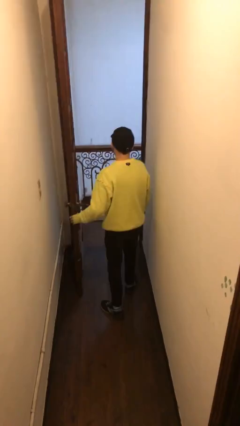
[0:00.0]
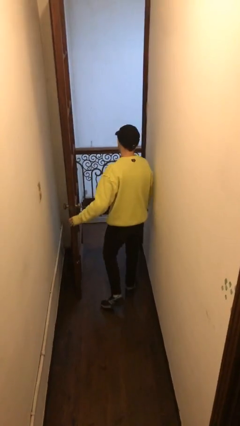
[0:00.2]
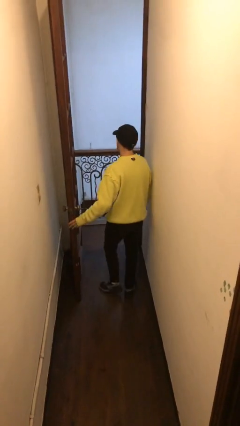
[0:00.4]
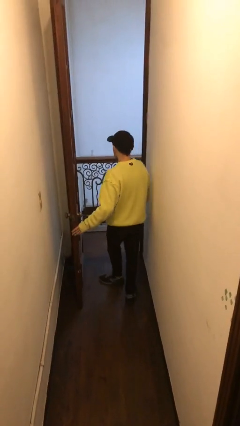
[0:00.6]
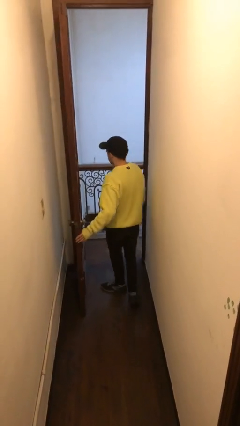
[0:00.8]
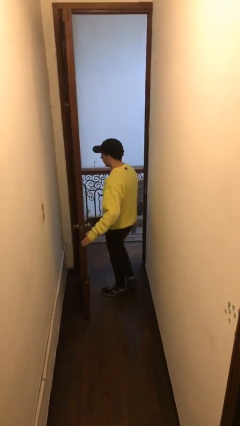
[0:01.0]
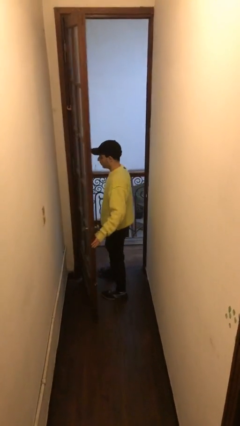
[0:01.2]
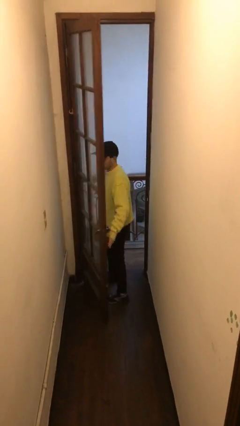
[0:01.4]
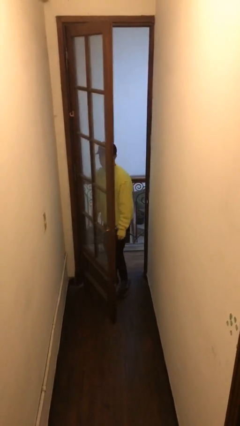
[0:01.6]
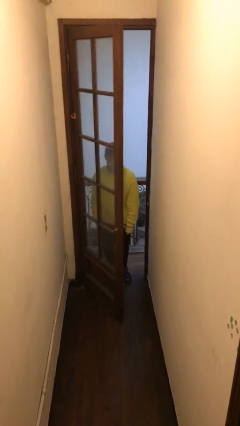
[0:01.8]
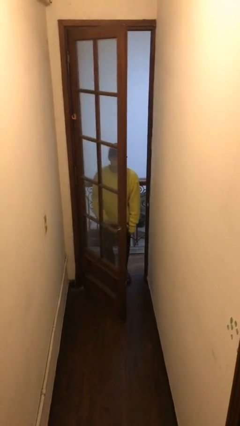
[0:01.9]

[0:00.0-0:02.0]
person exits scene through structure

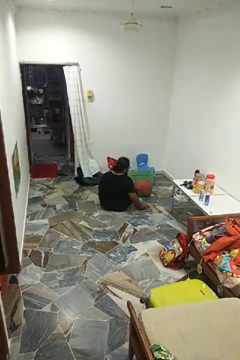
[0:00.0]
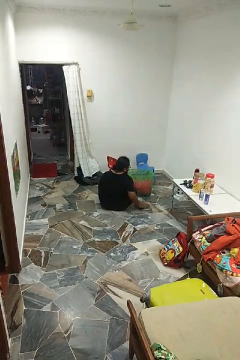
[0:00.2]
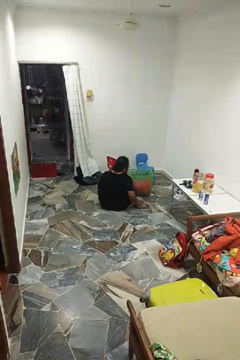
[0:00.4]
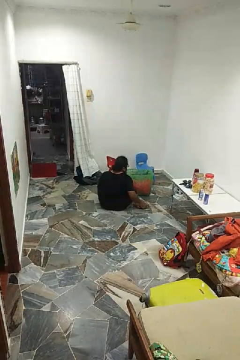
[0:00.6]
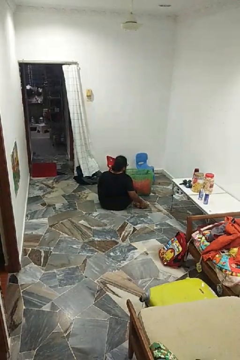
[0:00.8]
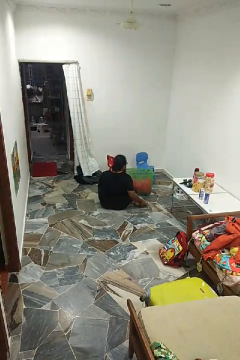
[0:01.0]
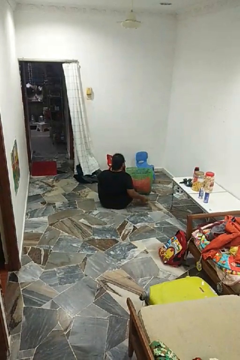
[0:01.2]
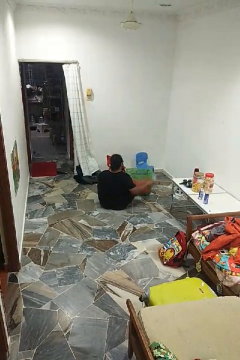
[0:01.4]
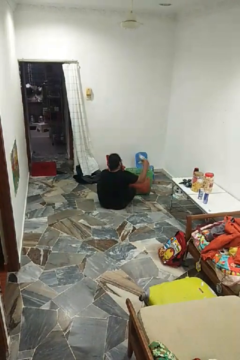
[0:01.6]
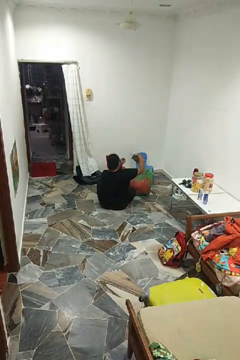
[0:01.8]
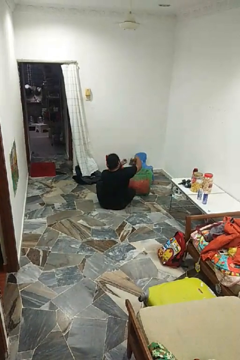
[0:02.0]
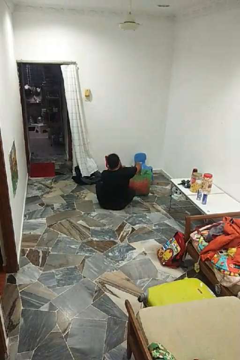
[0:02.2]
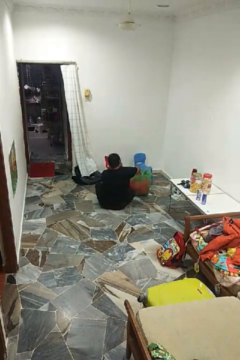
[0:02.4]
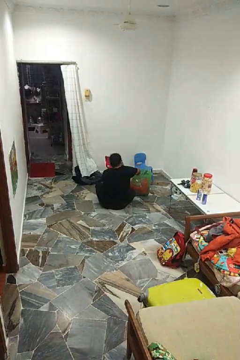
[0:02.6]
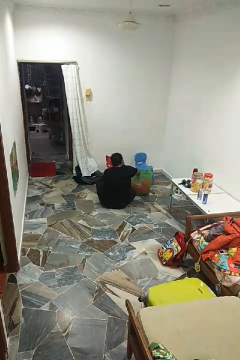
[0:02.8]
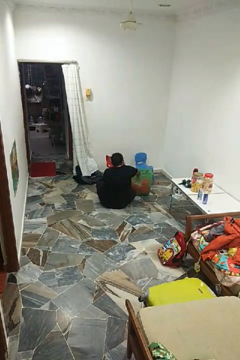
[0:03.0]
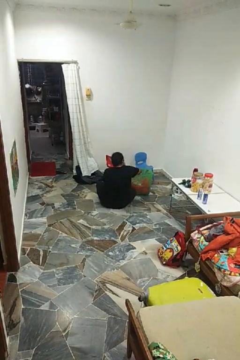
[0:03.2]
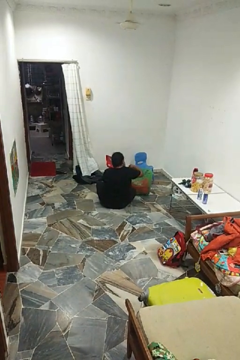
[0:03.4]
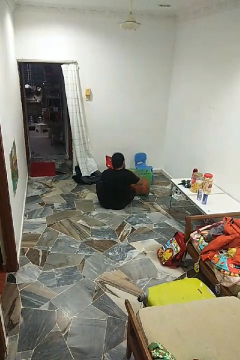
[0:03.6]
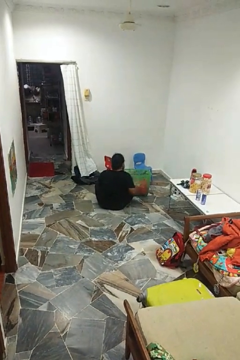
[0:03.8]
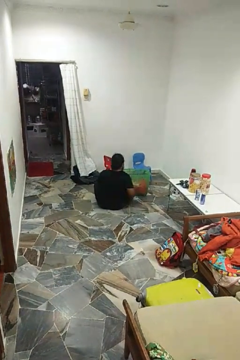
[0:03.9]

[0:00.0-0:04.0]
person puts object into basket

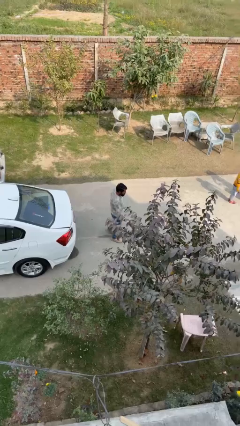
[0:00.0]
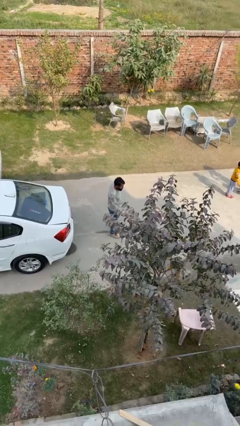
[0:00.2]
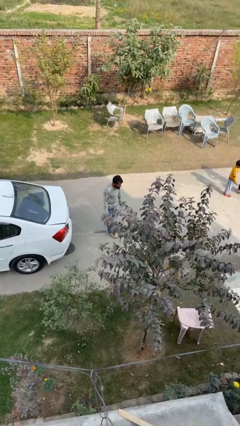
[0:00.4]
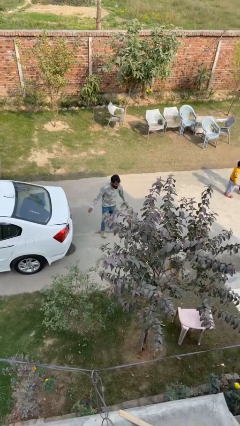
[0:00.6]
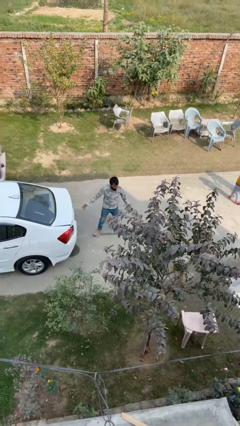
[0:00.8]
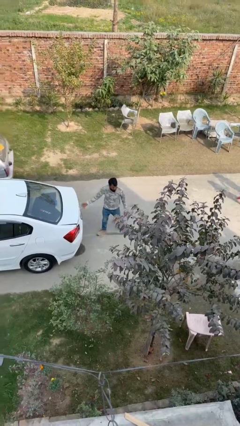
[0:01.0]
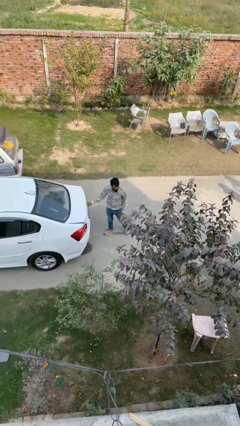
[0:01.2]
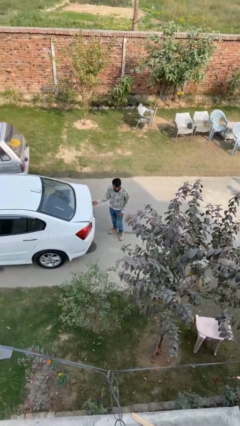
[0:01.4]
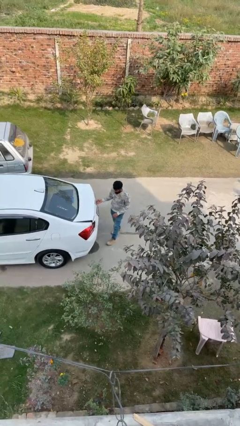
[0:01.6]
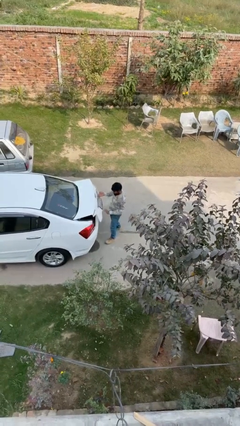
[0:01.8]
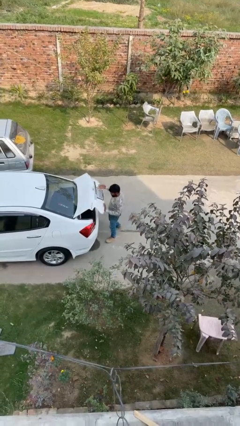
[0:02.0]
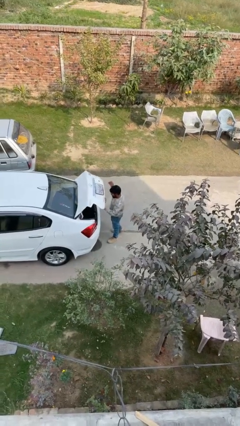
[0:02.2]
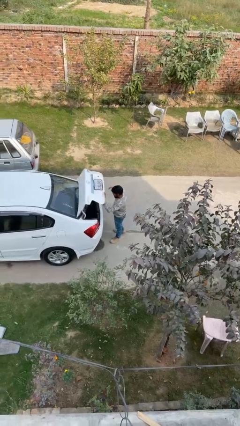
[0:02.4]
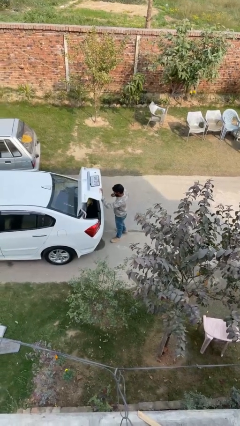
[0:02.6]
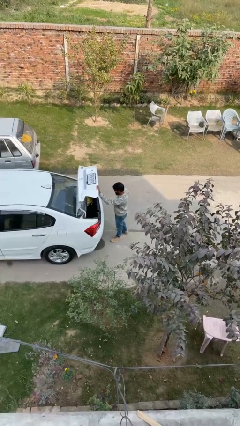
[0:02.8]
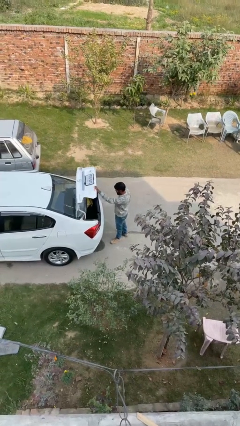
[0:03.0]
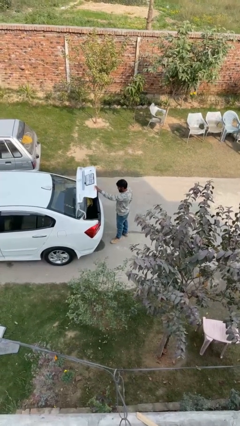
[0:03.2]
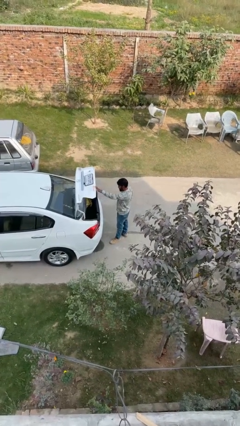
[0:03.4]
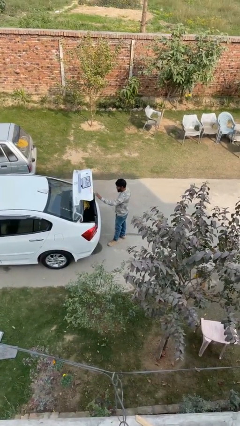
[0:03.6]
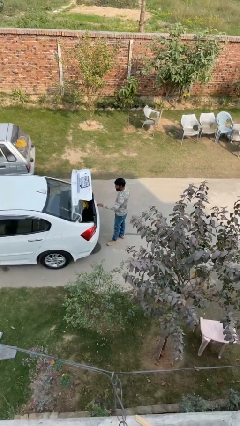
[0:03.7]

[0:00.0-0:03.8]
person opens car trunk

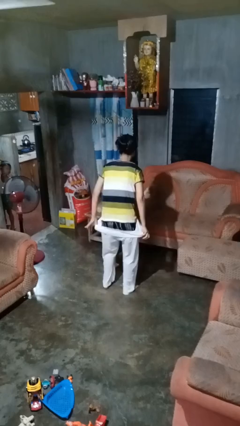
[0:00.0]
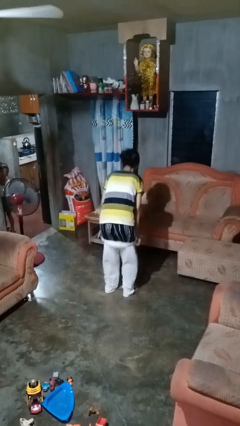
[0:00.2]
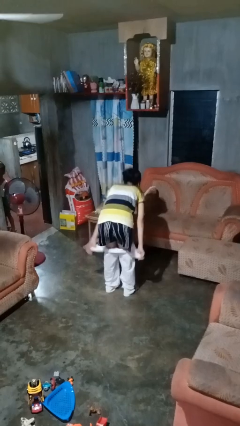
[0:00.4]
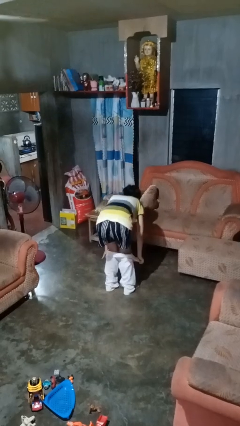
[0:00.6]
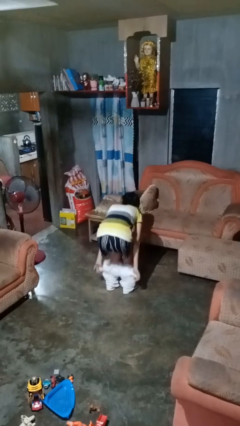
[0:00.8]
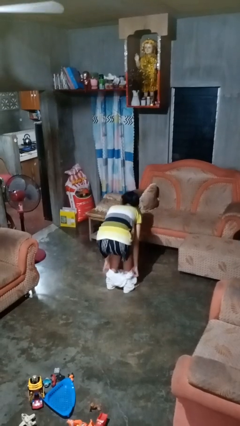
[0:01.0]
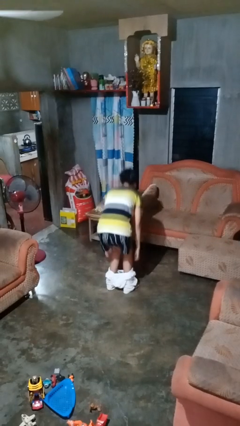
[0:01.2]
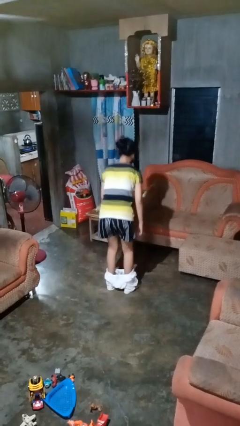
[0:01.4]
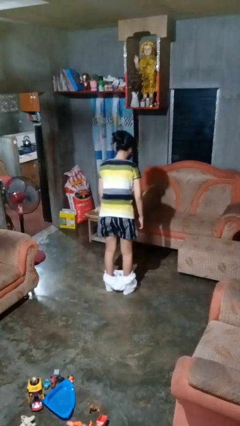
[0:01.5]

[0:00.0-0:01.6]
person takes off pants

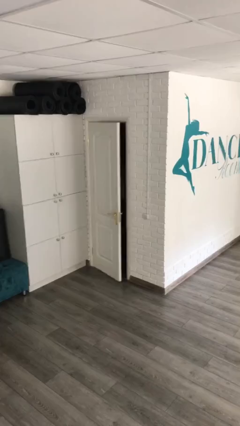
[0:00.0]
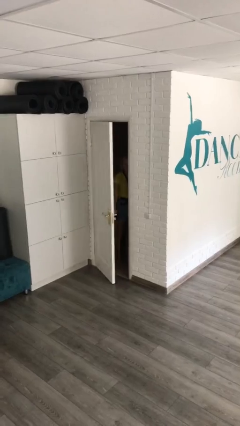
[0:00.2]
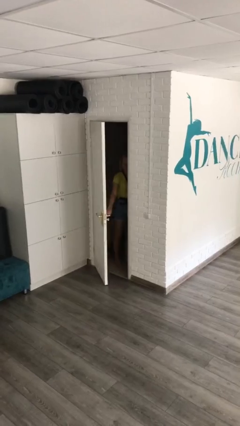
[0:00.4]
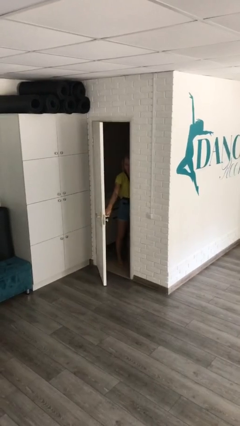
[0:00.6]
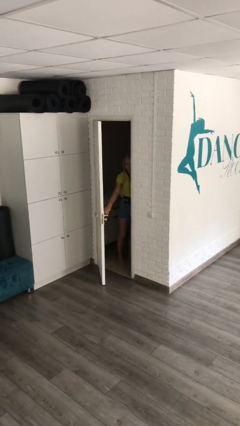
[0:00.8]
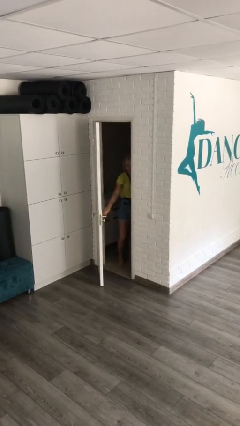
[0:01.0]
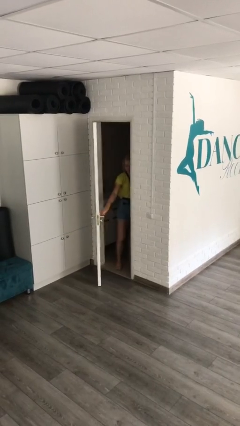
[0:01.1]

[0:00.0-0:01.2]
person opens facility door

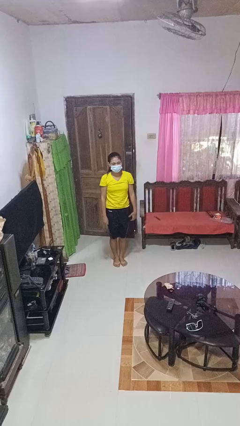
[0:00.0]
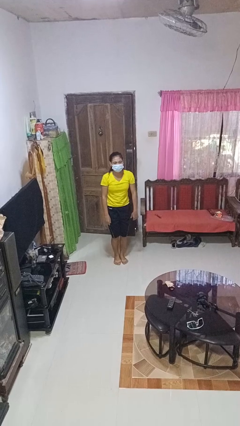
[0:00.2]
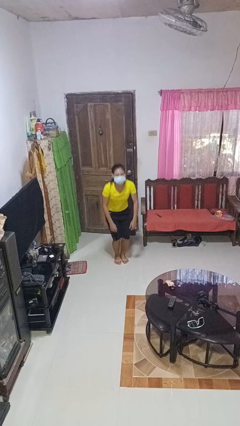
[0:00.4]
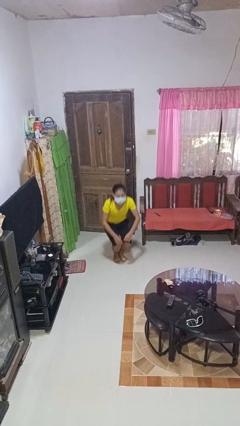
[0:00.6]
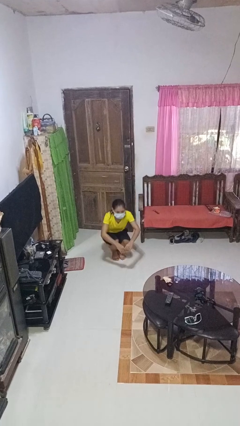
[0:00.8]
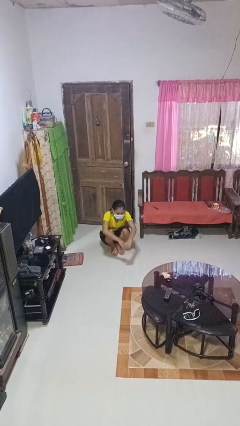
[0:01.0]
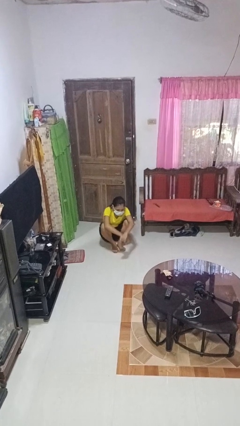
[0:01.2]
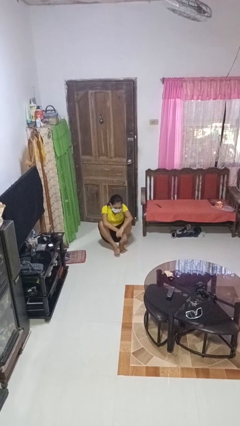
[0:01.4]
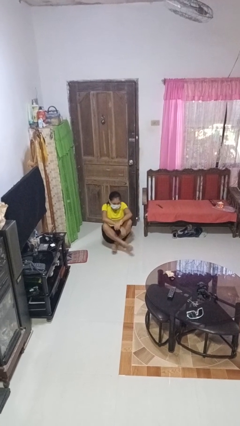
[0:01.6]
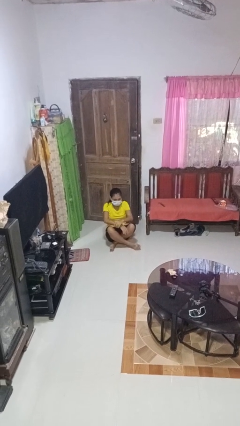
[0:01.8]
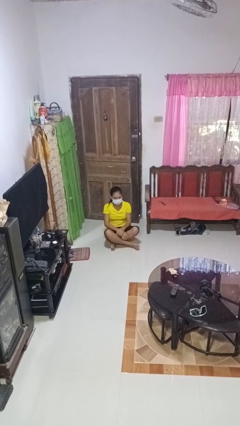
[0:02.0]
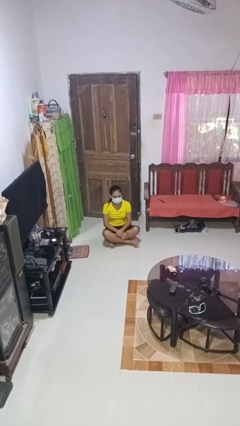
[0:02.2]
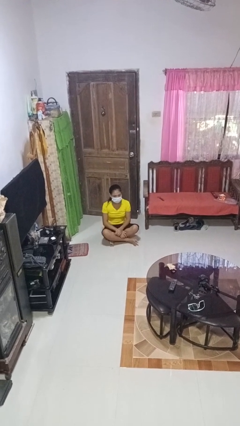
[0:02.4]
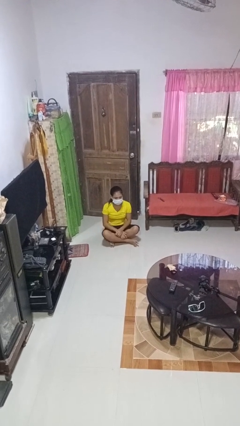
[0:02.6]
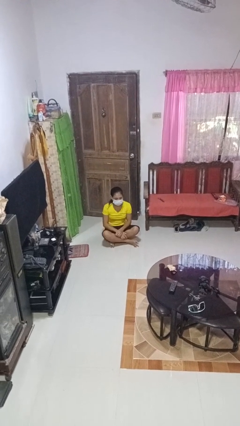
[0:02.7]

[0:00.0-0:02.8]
person sits crisscross

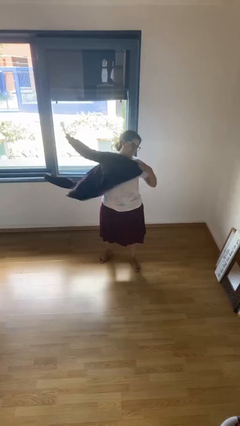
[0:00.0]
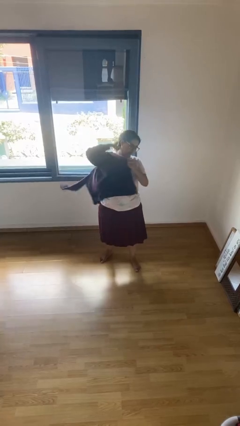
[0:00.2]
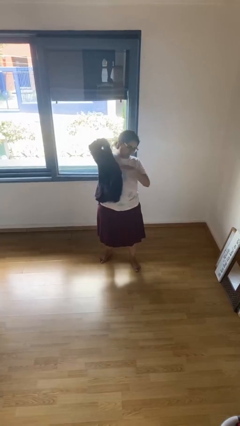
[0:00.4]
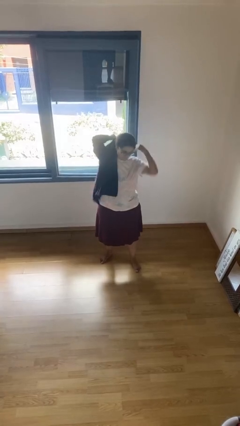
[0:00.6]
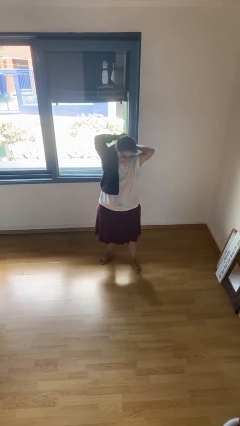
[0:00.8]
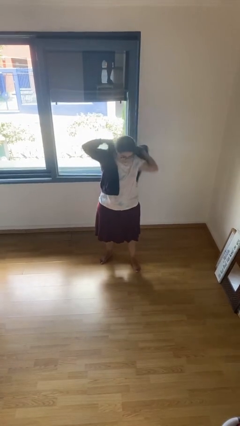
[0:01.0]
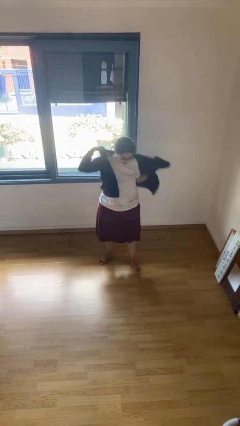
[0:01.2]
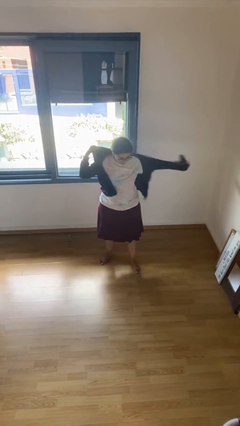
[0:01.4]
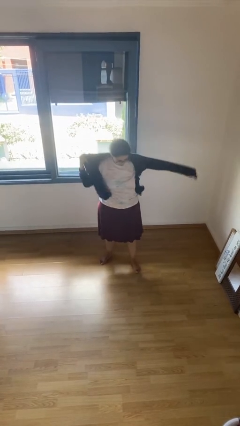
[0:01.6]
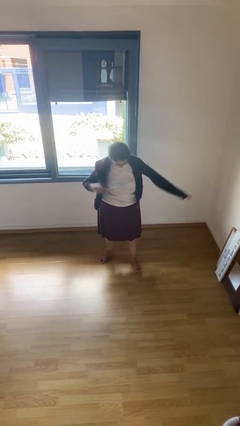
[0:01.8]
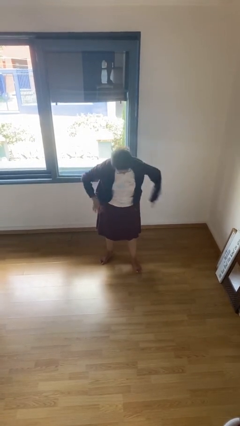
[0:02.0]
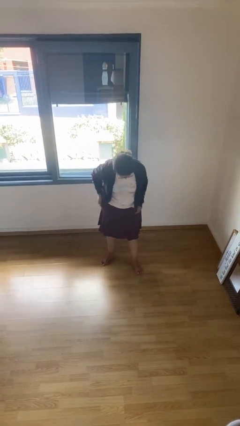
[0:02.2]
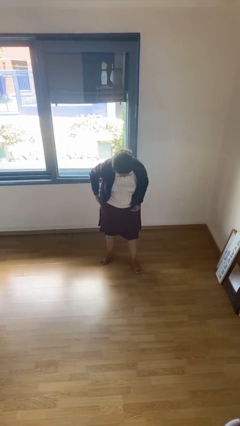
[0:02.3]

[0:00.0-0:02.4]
person puts on jacket

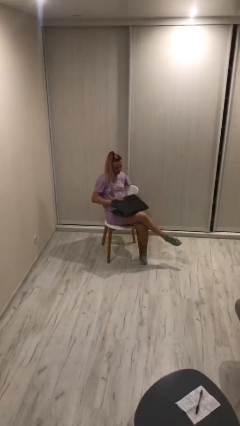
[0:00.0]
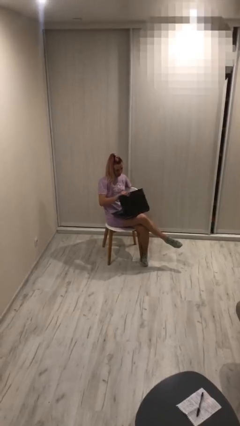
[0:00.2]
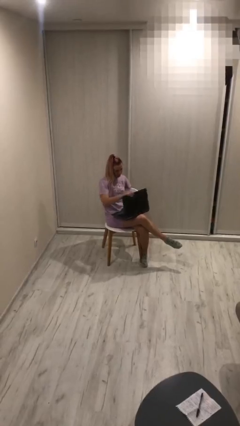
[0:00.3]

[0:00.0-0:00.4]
person opens laptop
